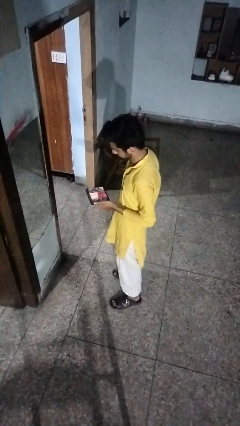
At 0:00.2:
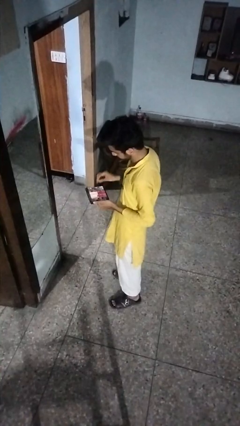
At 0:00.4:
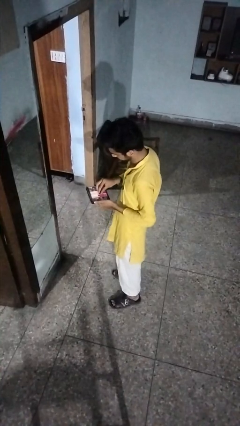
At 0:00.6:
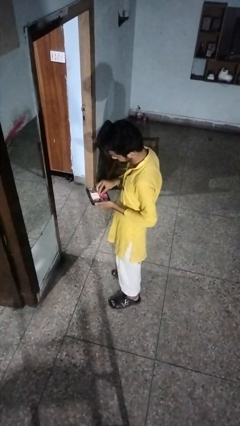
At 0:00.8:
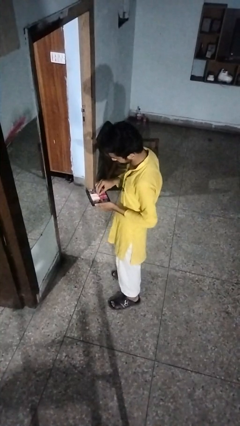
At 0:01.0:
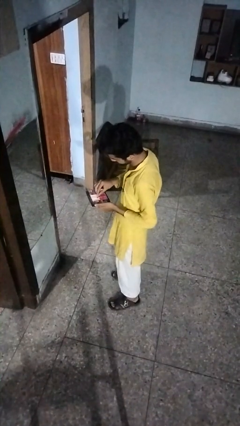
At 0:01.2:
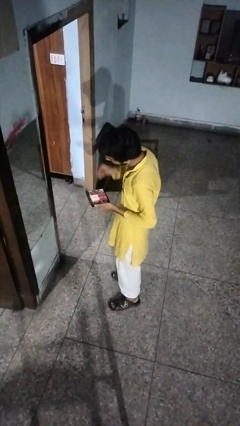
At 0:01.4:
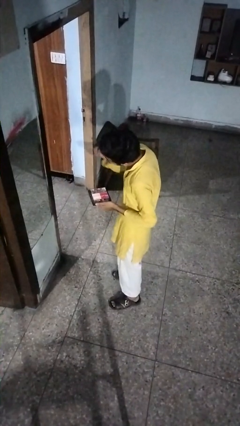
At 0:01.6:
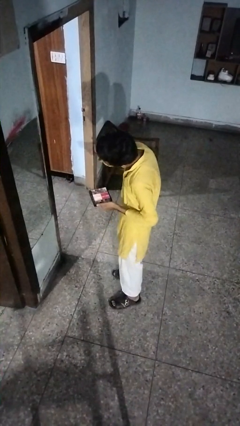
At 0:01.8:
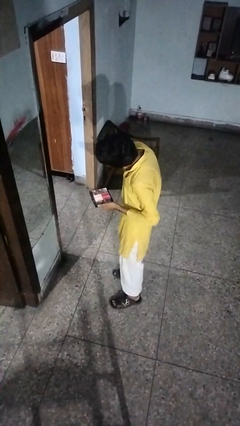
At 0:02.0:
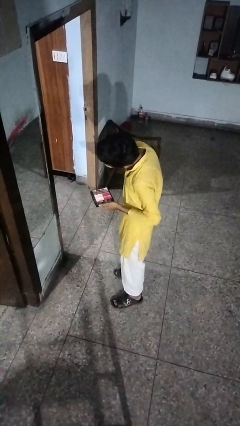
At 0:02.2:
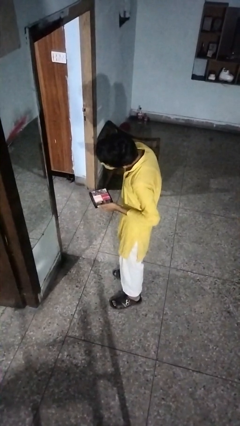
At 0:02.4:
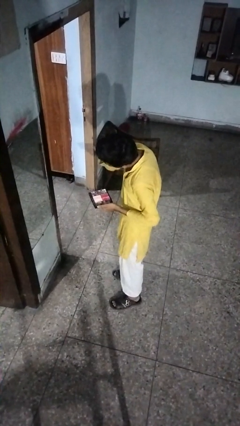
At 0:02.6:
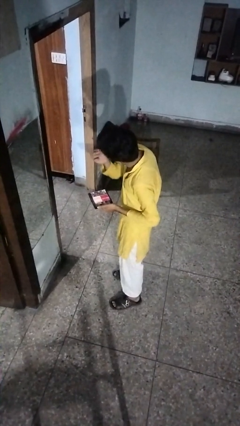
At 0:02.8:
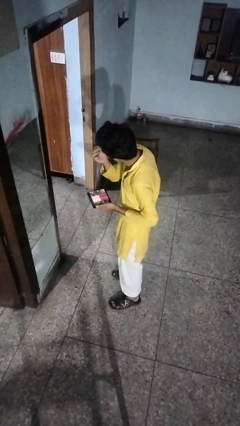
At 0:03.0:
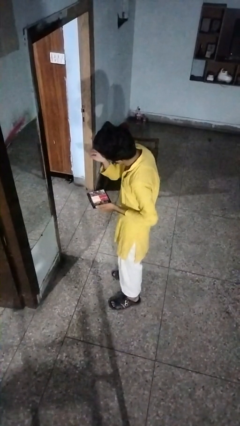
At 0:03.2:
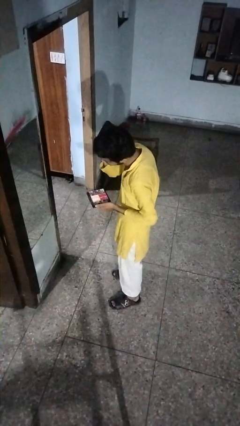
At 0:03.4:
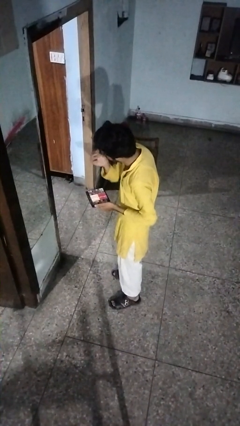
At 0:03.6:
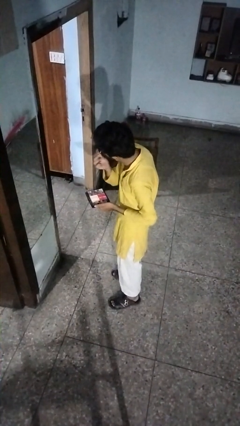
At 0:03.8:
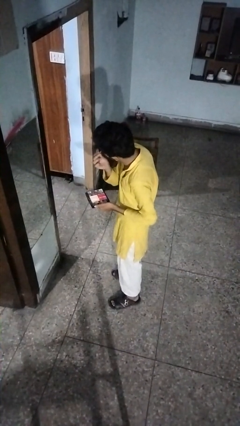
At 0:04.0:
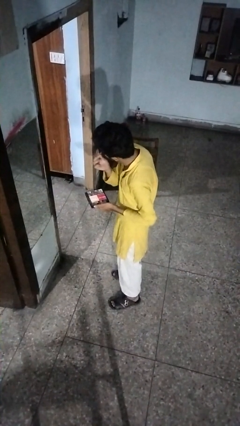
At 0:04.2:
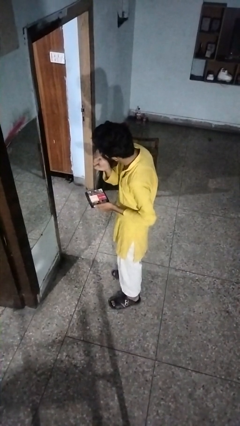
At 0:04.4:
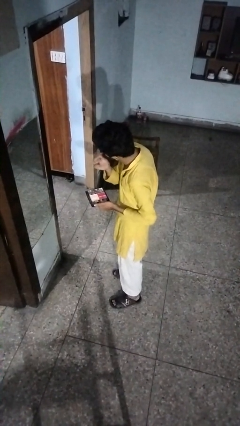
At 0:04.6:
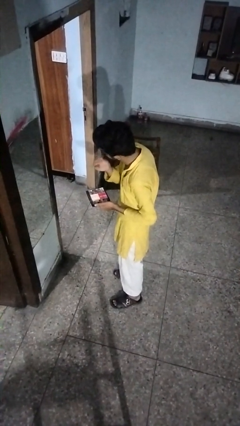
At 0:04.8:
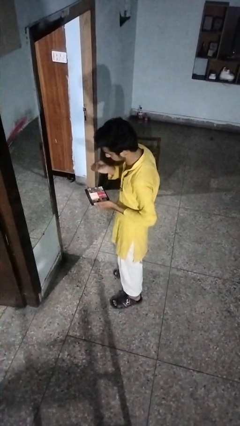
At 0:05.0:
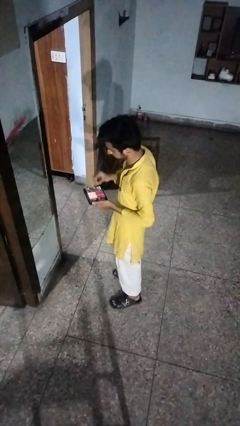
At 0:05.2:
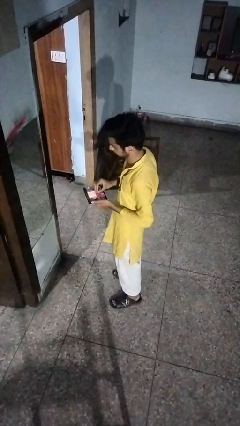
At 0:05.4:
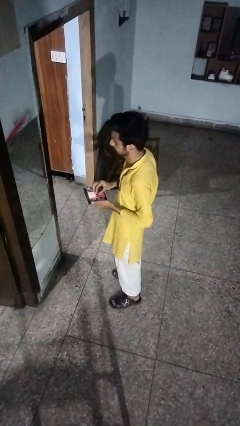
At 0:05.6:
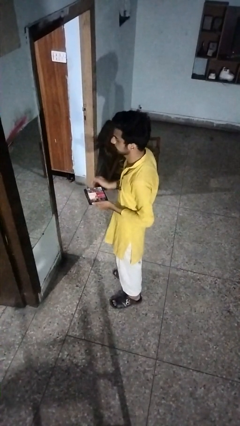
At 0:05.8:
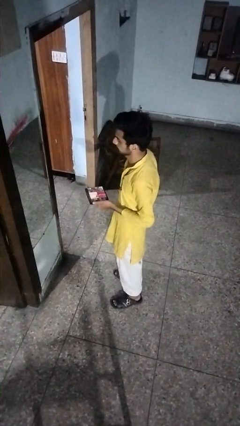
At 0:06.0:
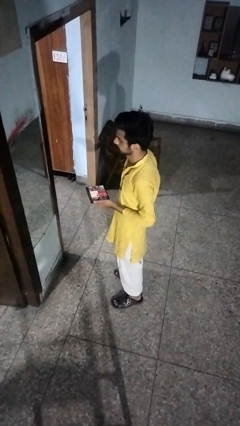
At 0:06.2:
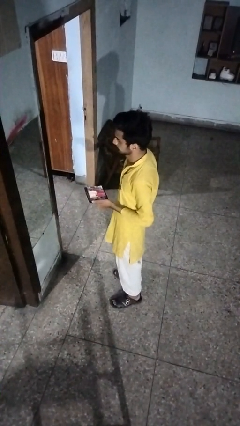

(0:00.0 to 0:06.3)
person applies eye makeup

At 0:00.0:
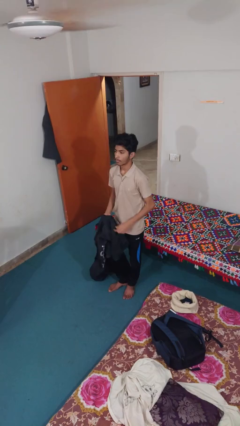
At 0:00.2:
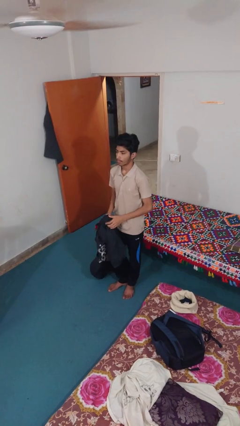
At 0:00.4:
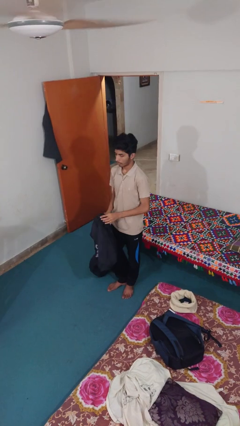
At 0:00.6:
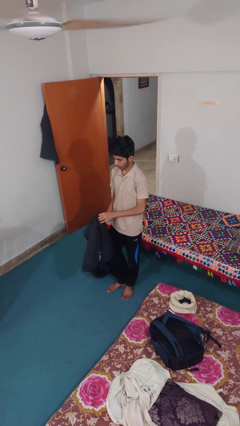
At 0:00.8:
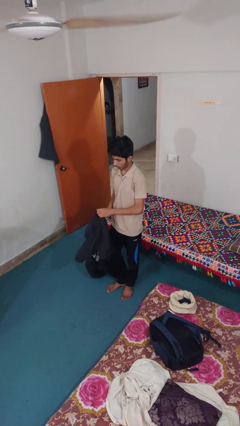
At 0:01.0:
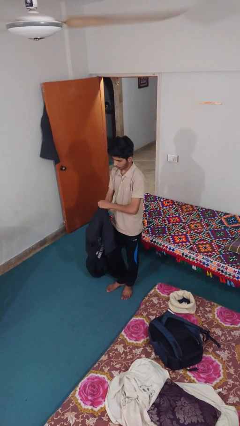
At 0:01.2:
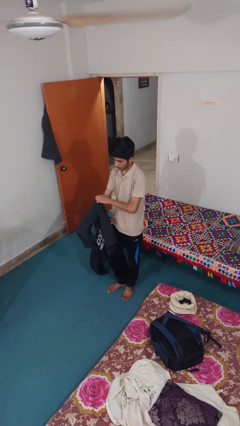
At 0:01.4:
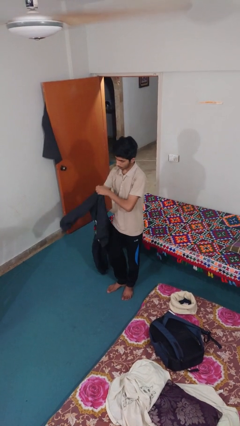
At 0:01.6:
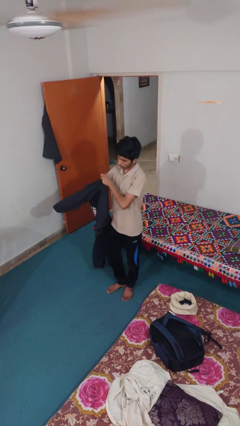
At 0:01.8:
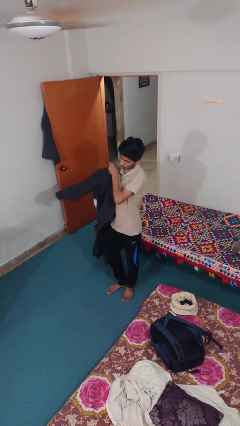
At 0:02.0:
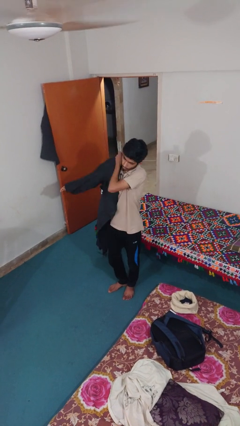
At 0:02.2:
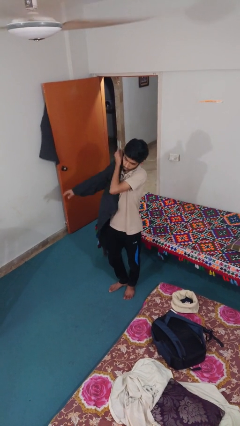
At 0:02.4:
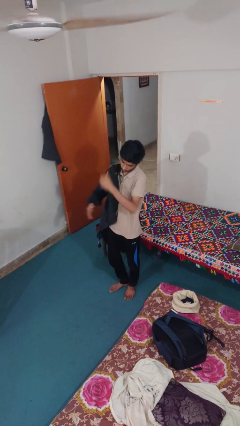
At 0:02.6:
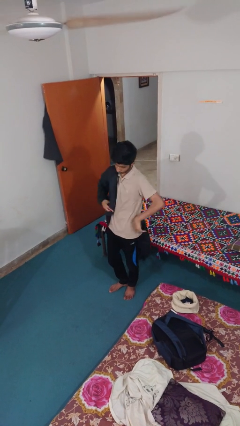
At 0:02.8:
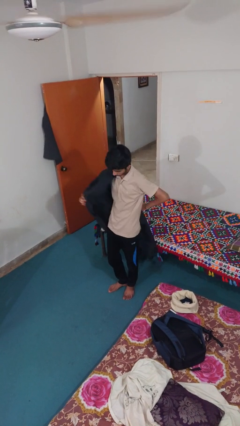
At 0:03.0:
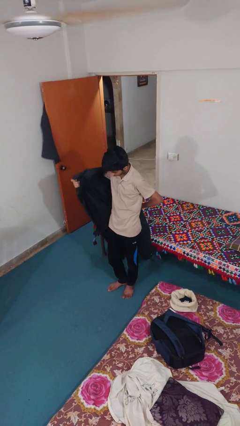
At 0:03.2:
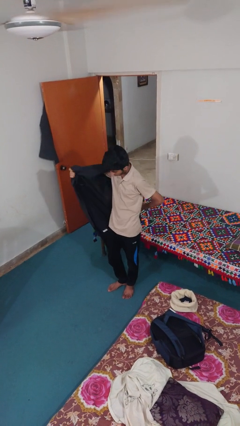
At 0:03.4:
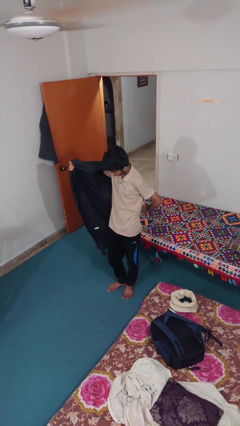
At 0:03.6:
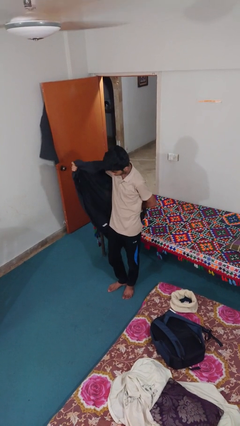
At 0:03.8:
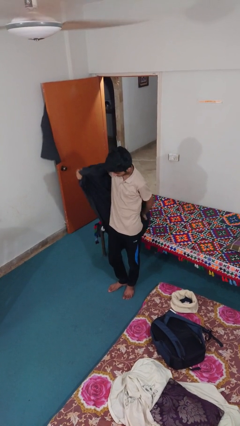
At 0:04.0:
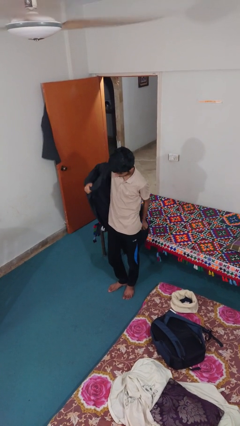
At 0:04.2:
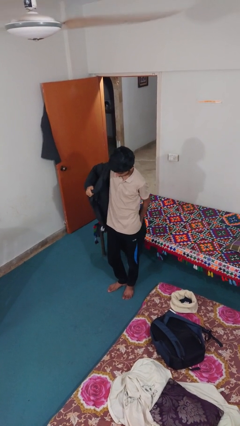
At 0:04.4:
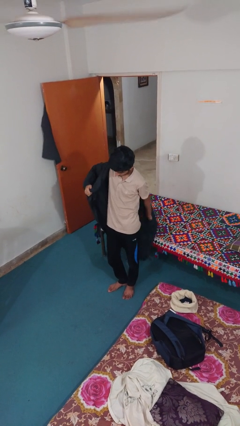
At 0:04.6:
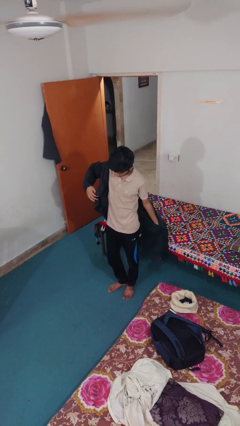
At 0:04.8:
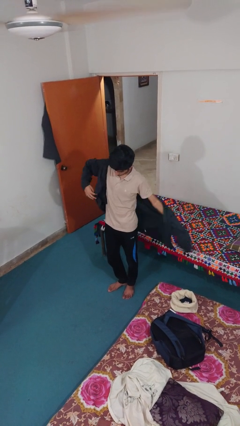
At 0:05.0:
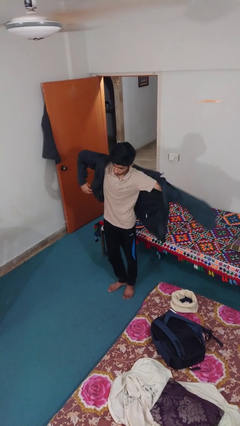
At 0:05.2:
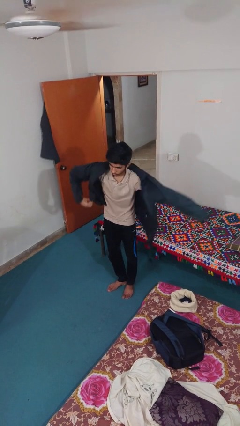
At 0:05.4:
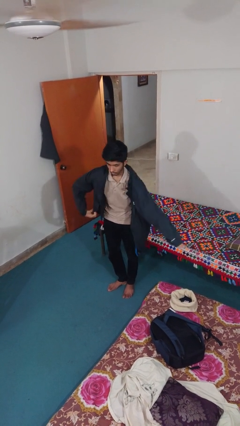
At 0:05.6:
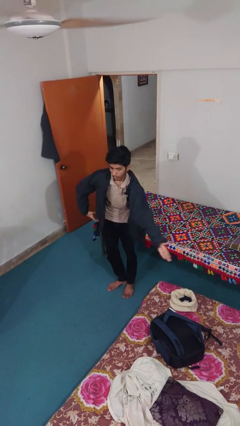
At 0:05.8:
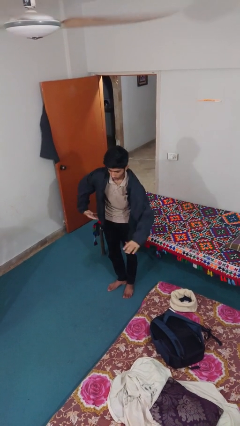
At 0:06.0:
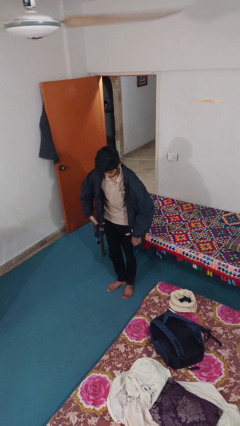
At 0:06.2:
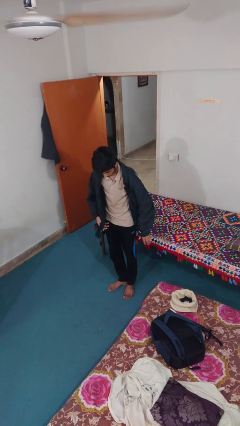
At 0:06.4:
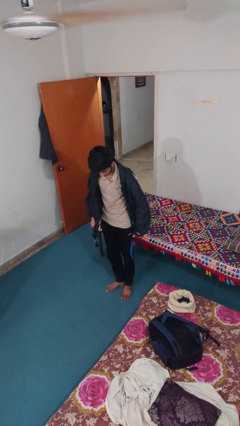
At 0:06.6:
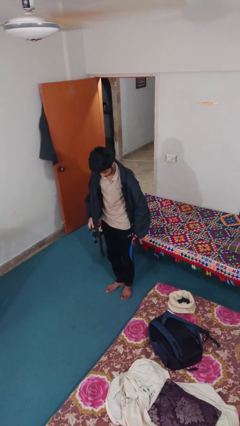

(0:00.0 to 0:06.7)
person puts on jacket

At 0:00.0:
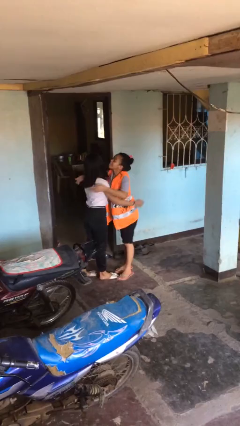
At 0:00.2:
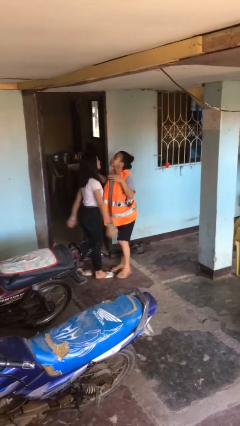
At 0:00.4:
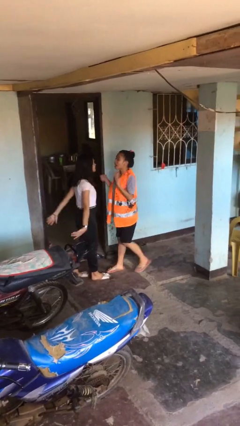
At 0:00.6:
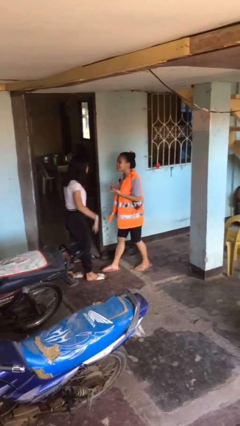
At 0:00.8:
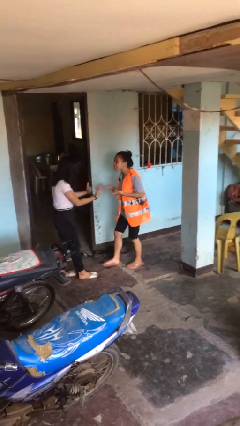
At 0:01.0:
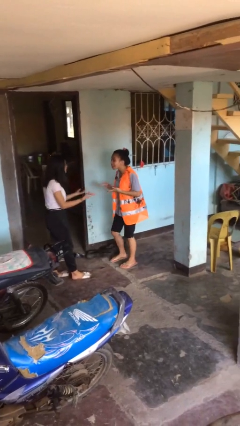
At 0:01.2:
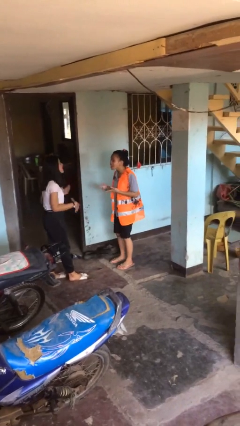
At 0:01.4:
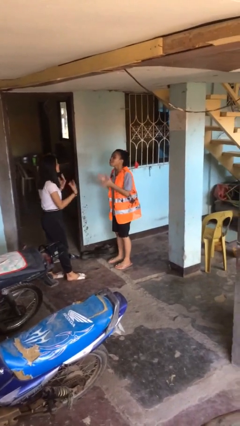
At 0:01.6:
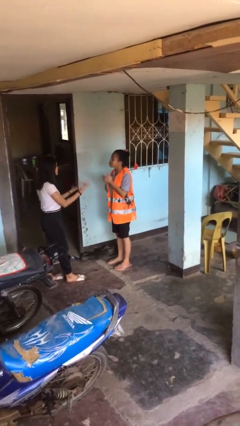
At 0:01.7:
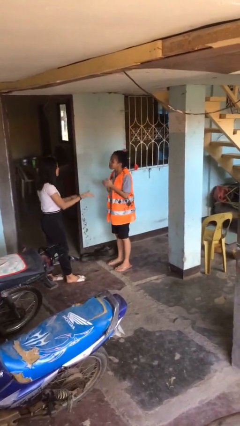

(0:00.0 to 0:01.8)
person talks to person

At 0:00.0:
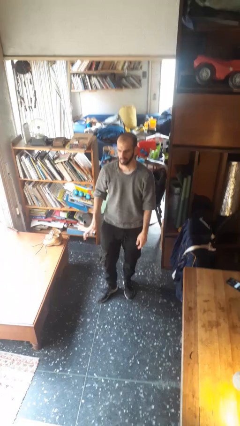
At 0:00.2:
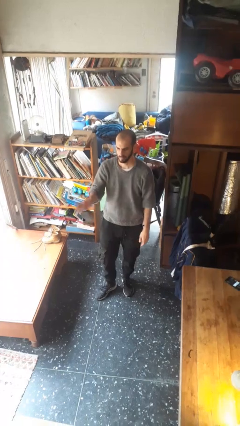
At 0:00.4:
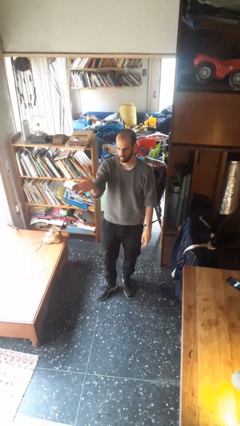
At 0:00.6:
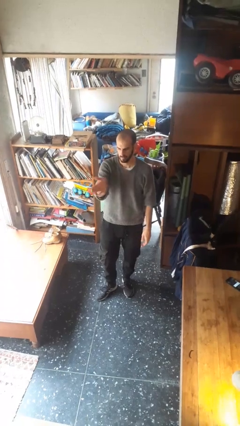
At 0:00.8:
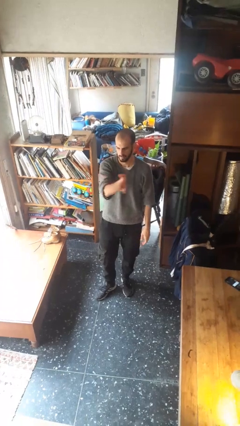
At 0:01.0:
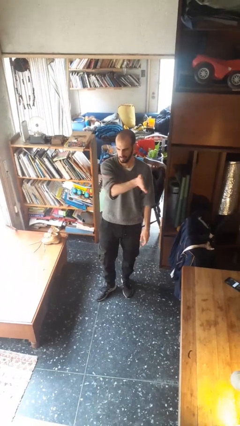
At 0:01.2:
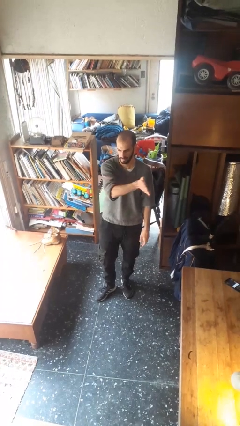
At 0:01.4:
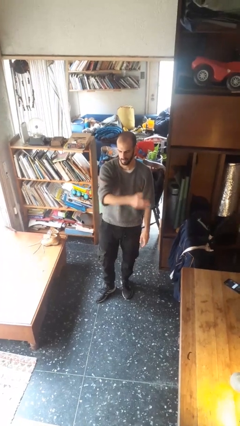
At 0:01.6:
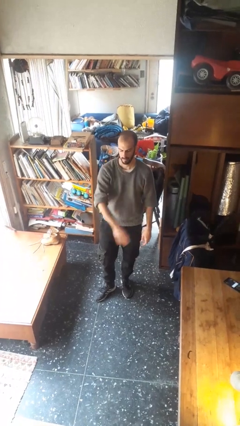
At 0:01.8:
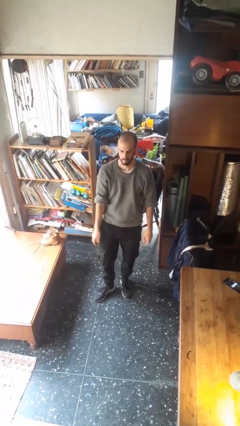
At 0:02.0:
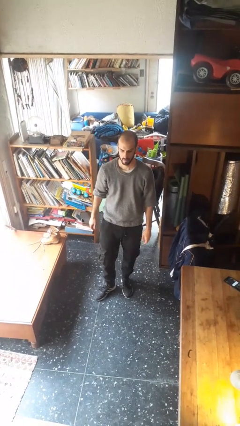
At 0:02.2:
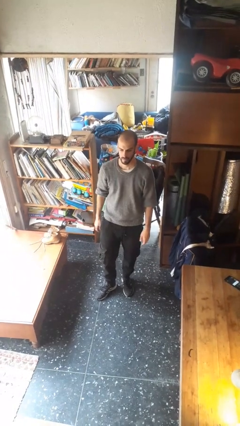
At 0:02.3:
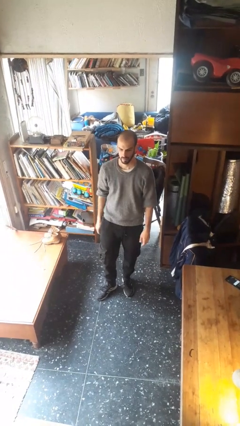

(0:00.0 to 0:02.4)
person gestures swipe left

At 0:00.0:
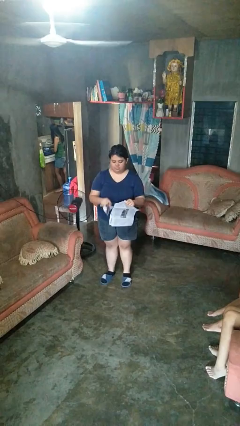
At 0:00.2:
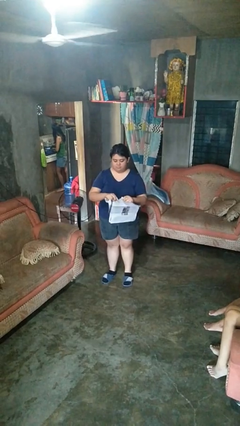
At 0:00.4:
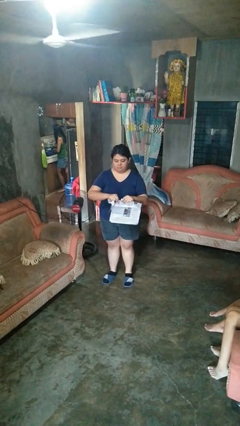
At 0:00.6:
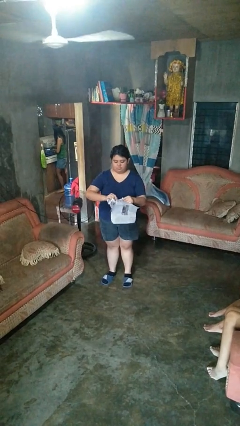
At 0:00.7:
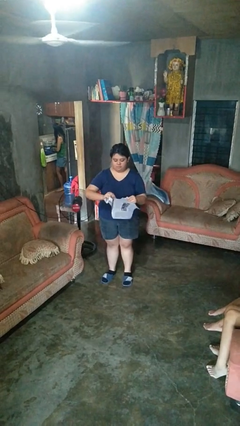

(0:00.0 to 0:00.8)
person tears paper
